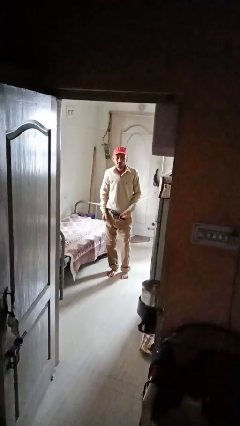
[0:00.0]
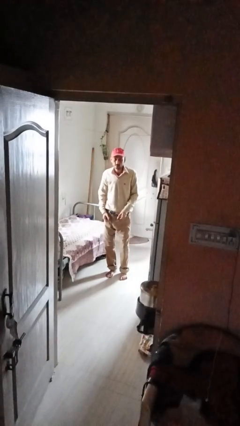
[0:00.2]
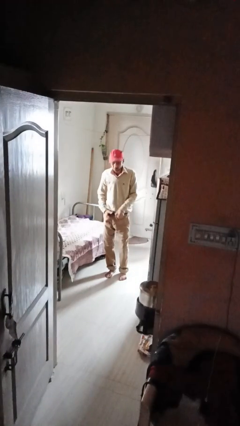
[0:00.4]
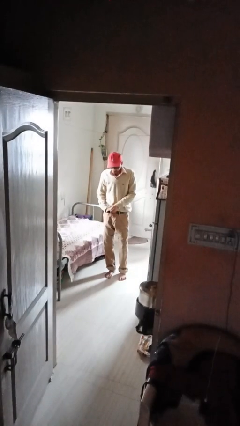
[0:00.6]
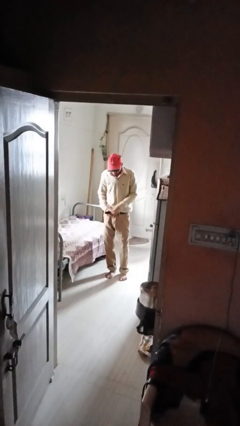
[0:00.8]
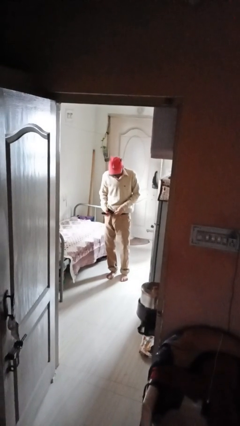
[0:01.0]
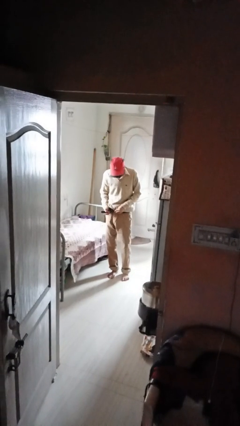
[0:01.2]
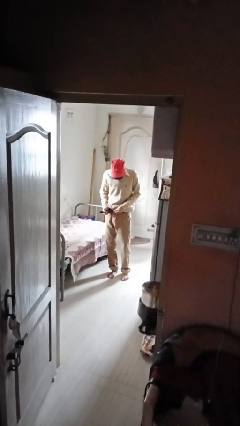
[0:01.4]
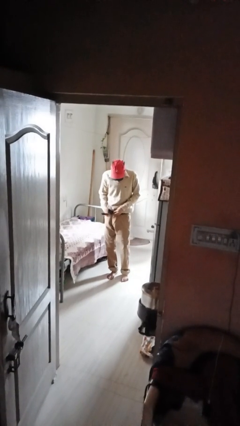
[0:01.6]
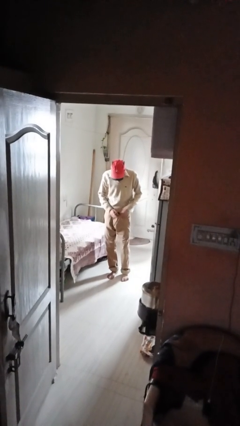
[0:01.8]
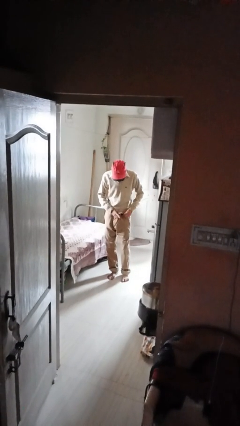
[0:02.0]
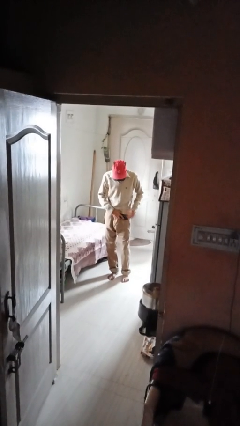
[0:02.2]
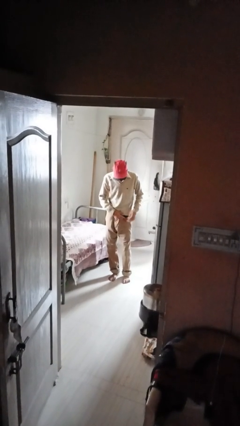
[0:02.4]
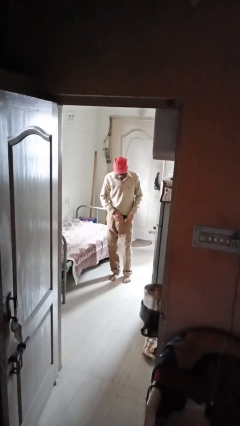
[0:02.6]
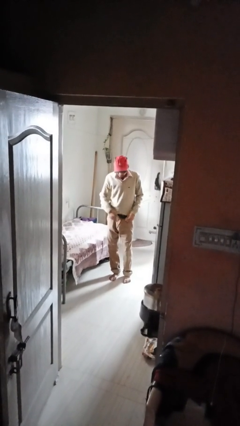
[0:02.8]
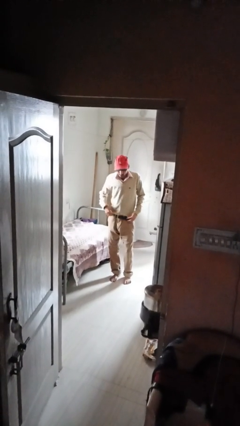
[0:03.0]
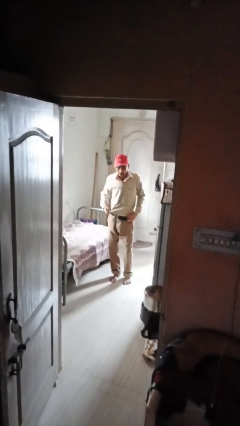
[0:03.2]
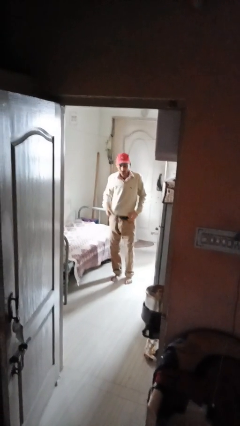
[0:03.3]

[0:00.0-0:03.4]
person puts on belt

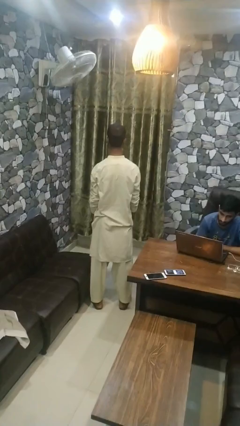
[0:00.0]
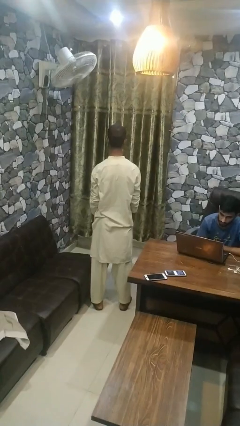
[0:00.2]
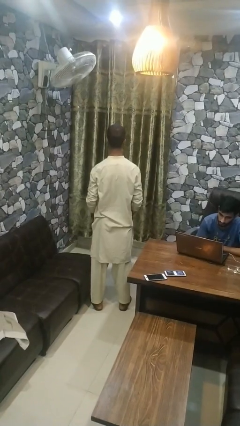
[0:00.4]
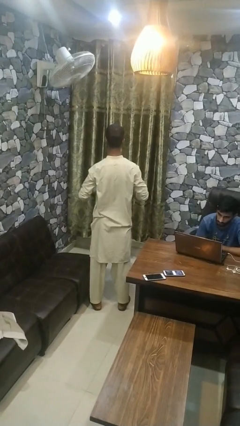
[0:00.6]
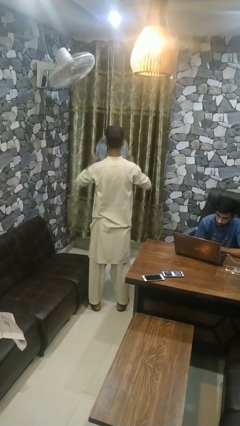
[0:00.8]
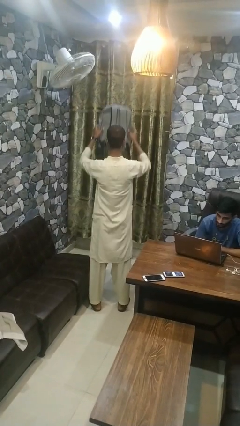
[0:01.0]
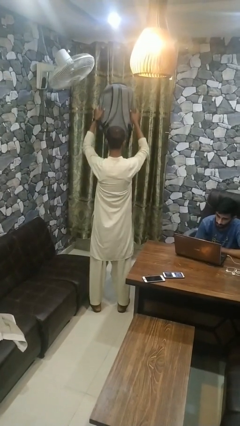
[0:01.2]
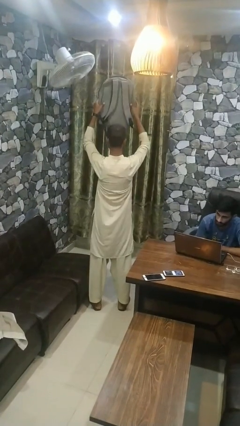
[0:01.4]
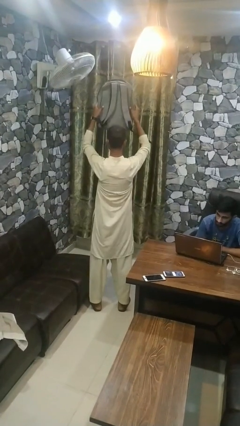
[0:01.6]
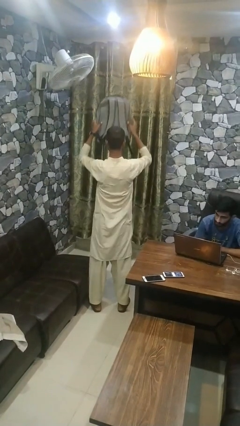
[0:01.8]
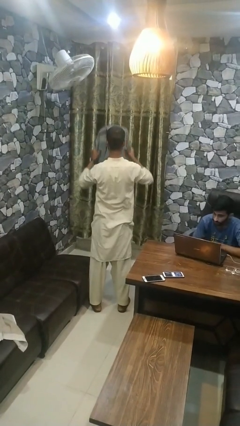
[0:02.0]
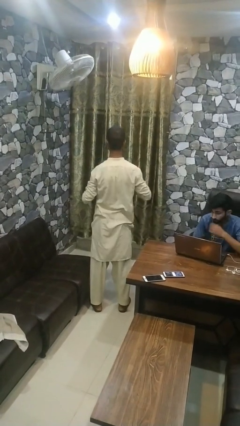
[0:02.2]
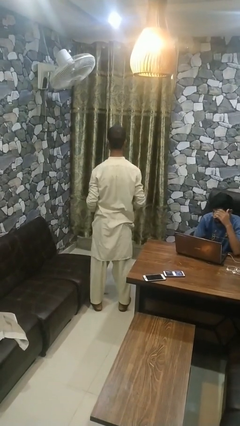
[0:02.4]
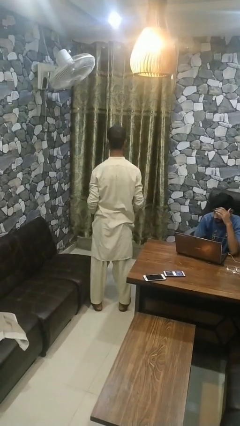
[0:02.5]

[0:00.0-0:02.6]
person holds object above head

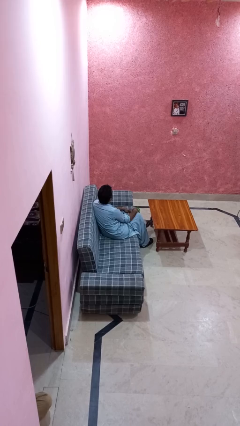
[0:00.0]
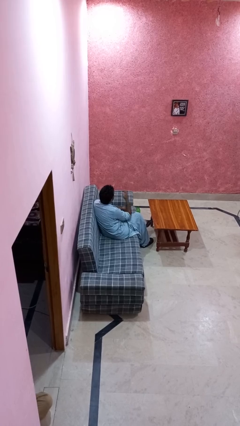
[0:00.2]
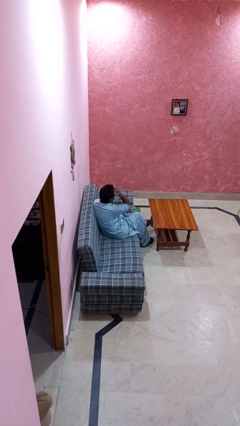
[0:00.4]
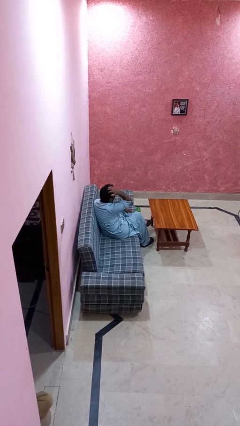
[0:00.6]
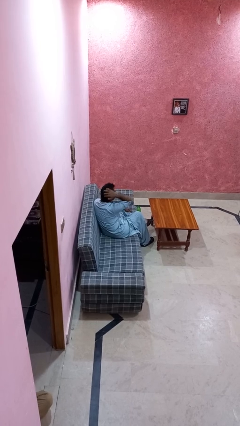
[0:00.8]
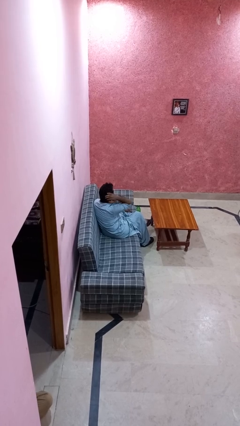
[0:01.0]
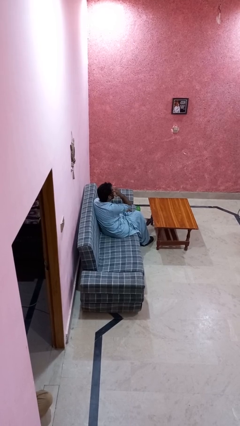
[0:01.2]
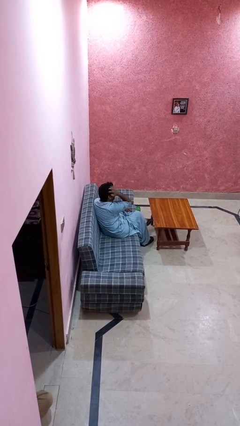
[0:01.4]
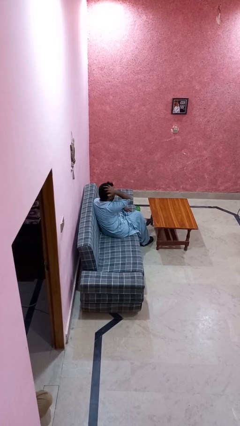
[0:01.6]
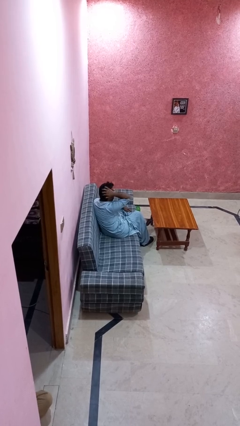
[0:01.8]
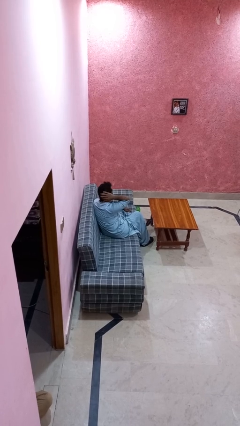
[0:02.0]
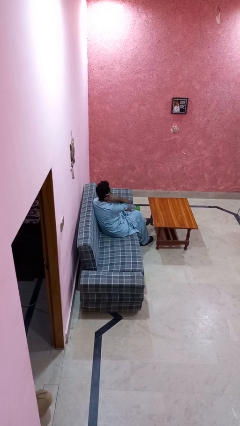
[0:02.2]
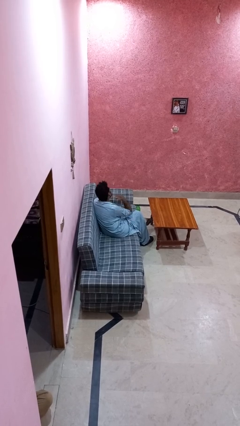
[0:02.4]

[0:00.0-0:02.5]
person strokes hair

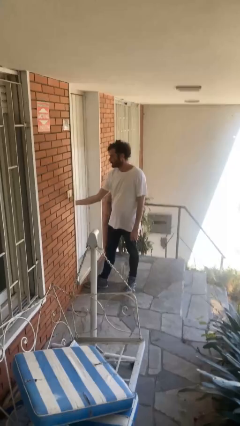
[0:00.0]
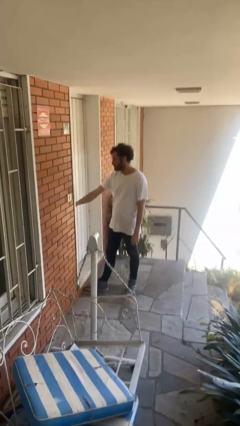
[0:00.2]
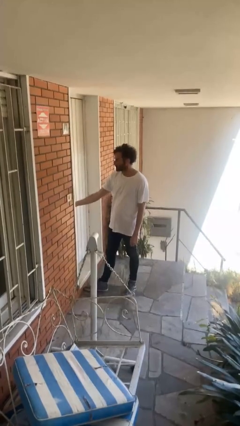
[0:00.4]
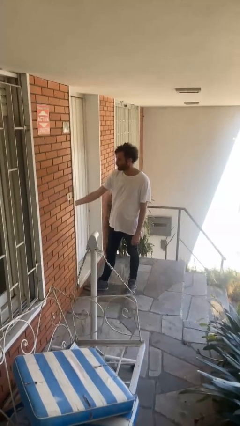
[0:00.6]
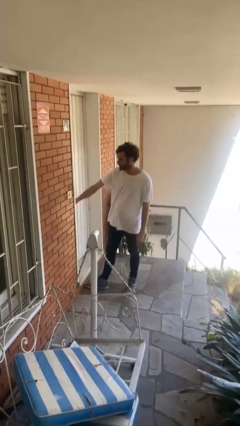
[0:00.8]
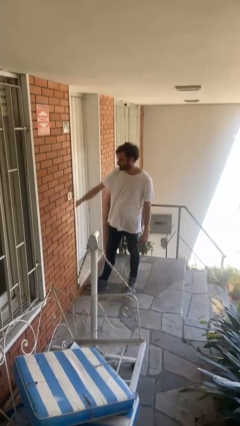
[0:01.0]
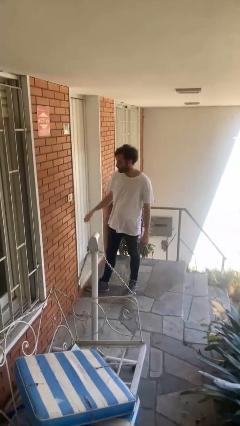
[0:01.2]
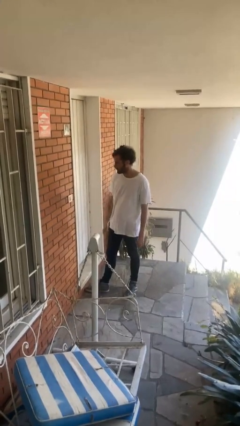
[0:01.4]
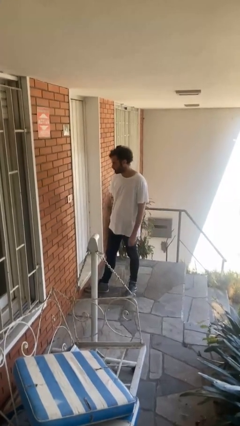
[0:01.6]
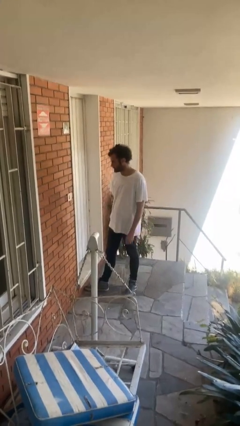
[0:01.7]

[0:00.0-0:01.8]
person locks door with keys

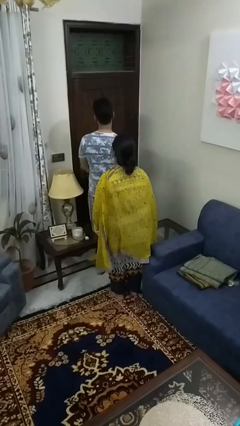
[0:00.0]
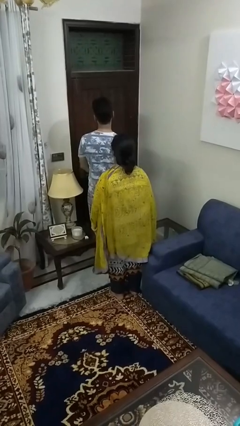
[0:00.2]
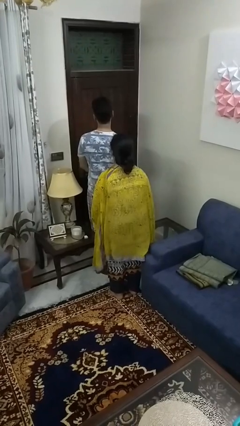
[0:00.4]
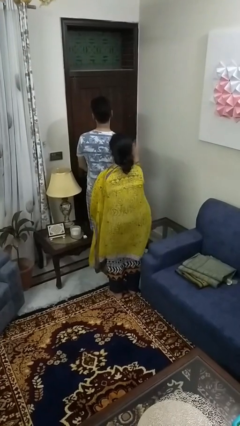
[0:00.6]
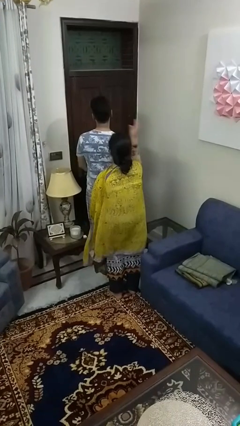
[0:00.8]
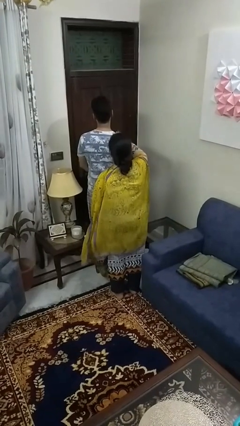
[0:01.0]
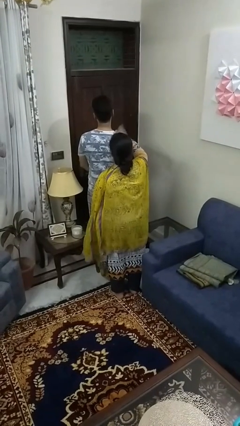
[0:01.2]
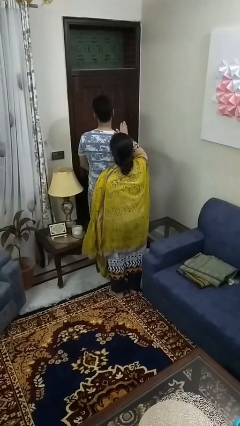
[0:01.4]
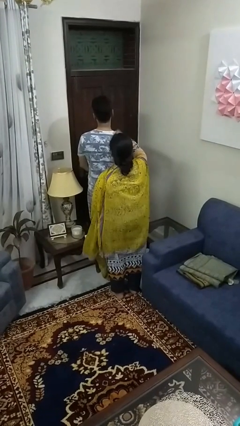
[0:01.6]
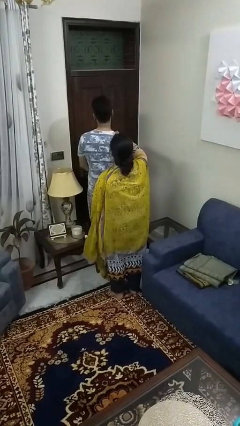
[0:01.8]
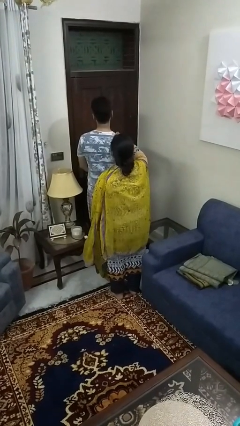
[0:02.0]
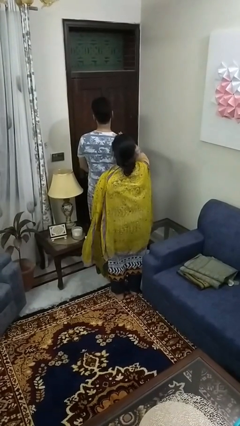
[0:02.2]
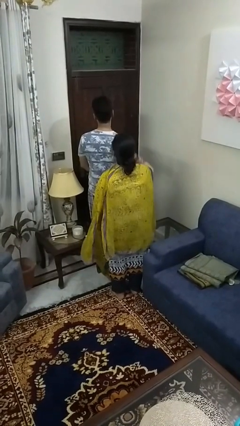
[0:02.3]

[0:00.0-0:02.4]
person pounds shoulders of person

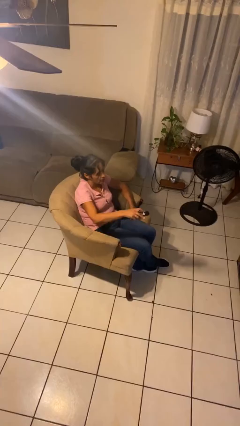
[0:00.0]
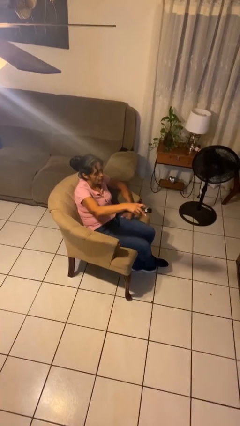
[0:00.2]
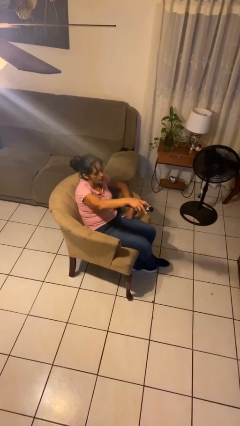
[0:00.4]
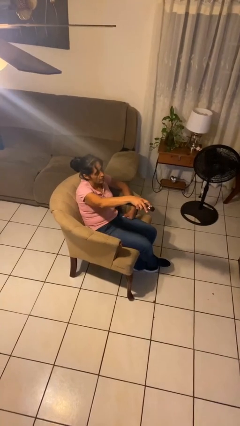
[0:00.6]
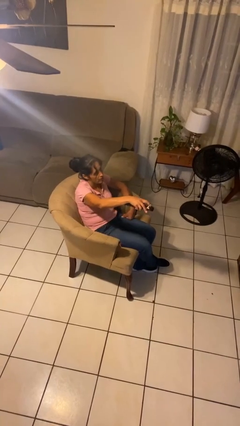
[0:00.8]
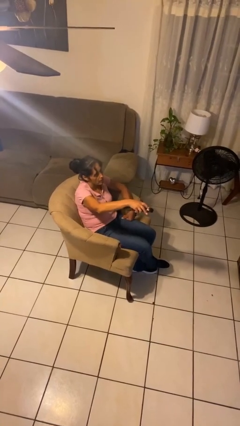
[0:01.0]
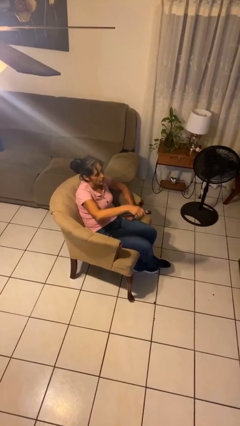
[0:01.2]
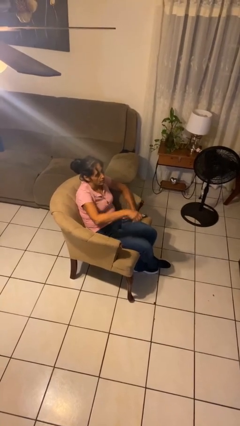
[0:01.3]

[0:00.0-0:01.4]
person uses television remote

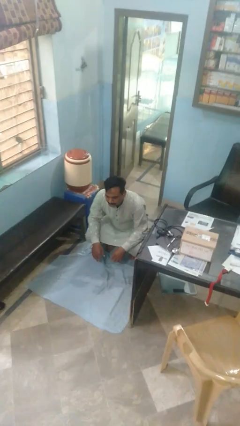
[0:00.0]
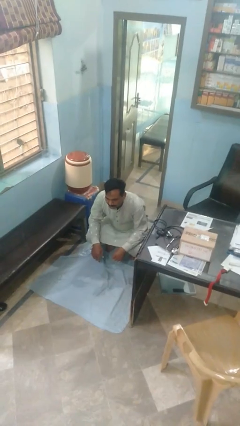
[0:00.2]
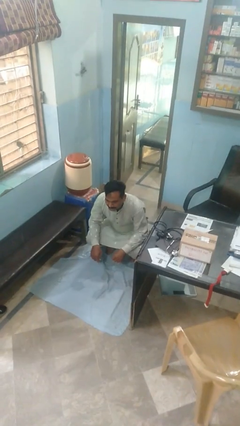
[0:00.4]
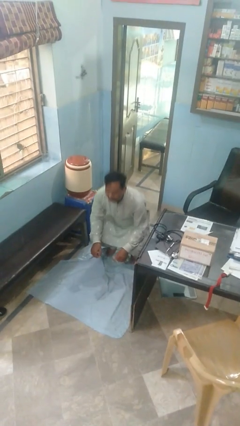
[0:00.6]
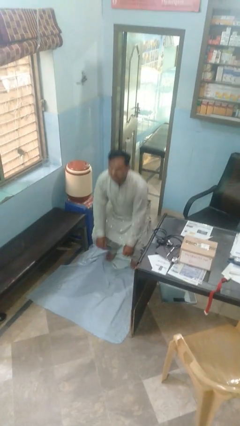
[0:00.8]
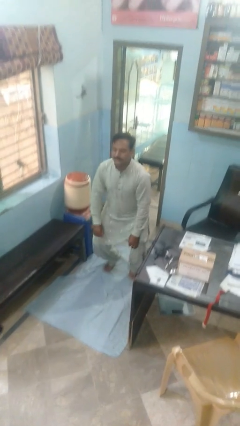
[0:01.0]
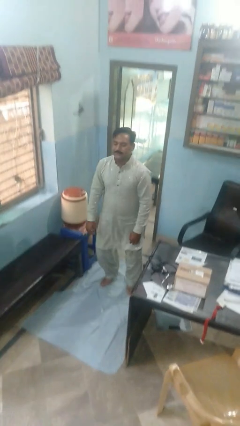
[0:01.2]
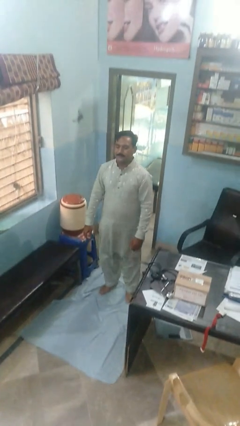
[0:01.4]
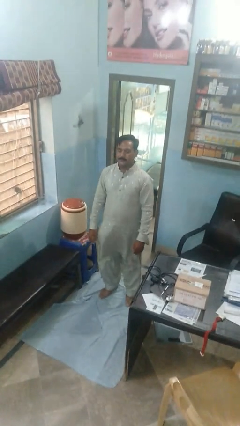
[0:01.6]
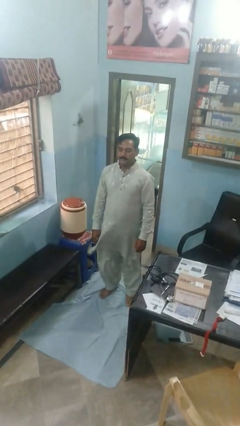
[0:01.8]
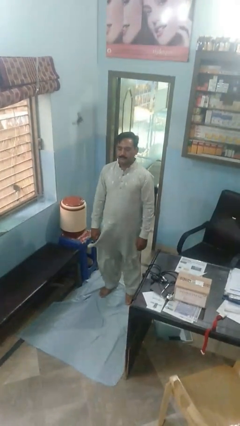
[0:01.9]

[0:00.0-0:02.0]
person stands up

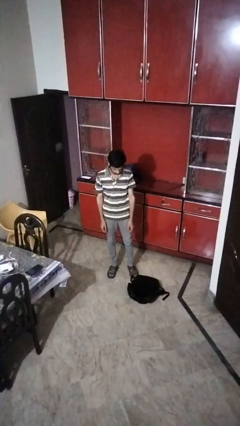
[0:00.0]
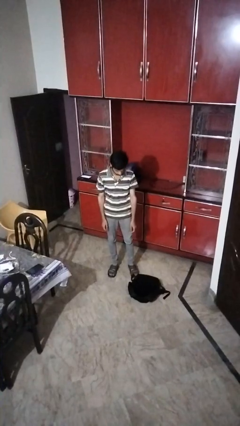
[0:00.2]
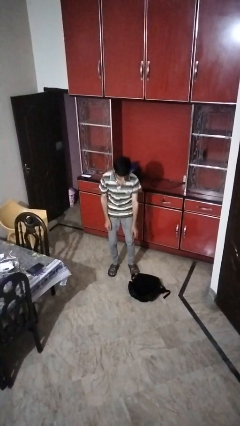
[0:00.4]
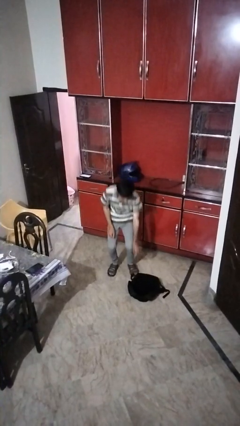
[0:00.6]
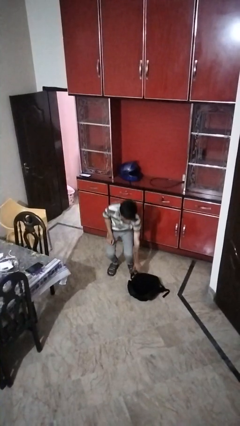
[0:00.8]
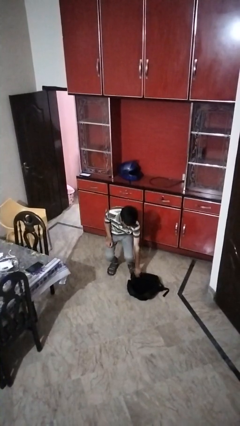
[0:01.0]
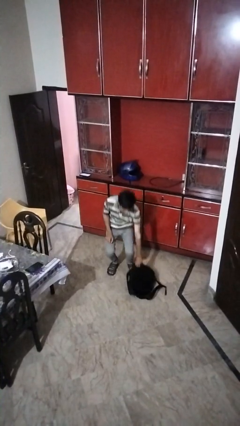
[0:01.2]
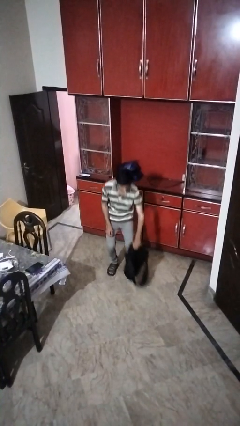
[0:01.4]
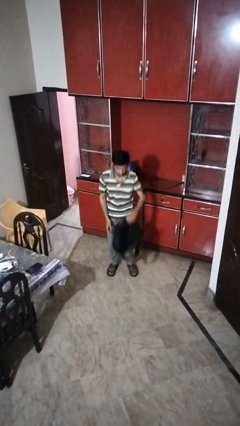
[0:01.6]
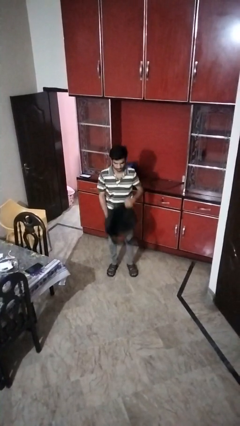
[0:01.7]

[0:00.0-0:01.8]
person picks up object from floor
